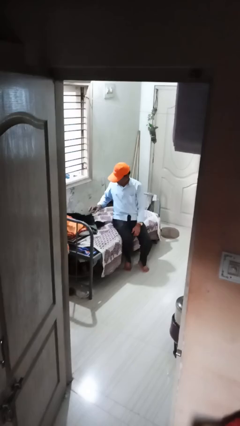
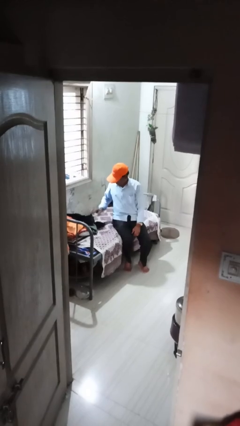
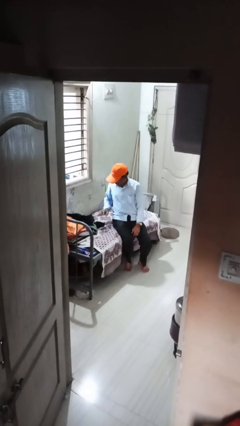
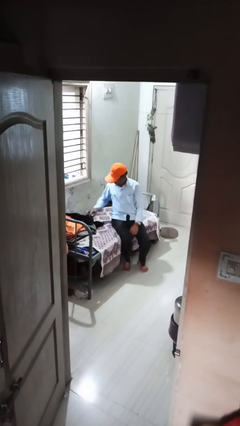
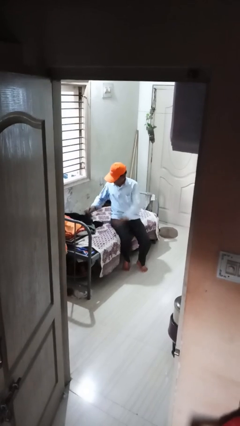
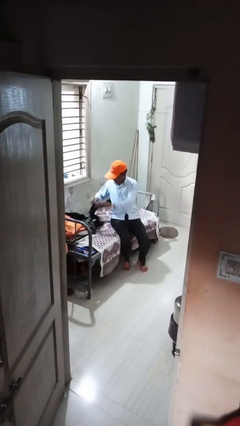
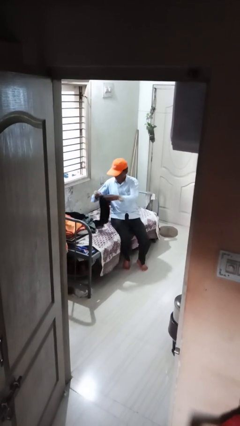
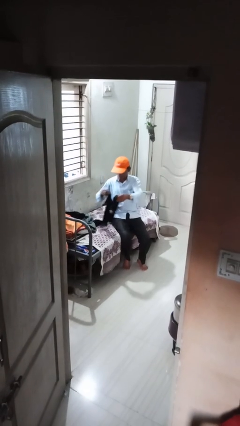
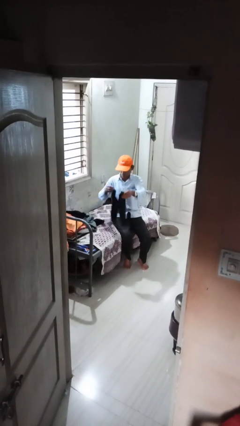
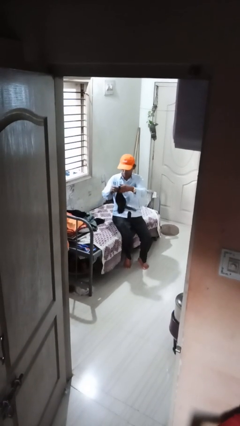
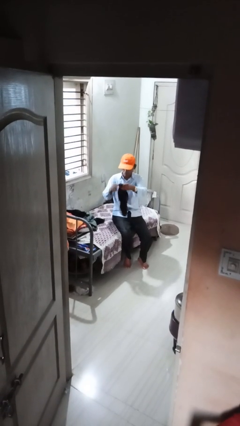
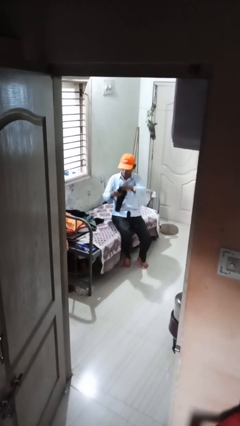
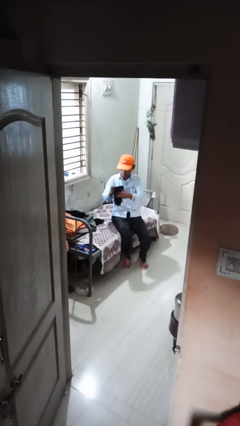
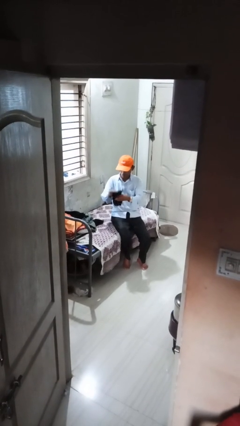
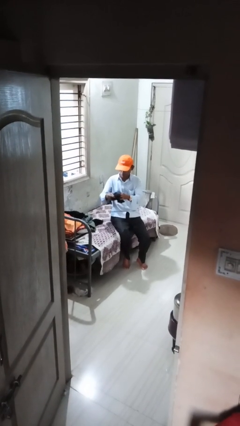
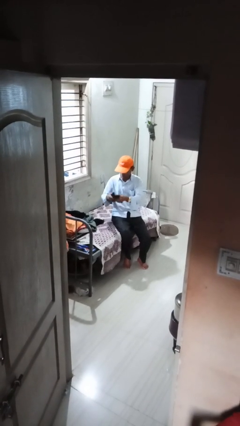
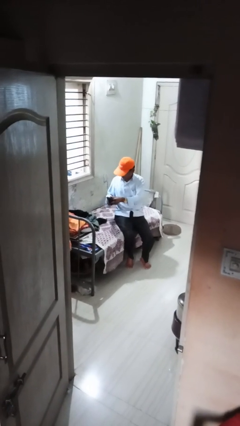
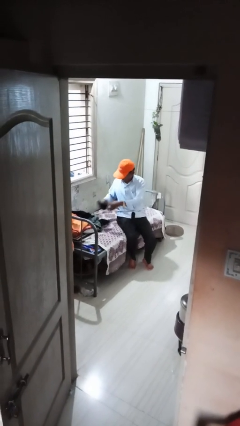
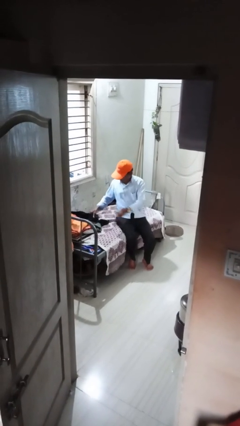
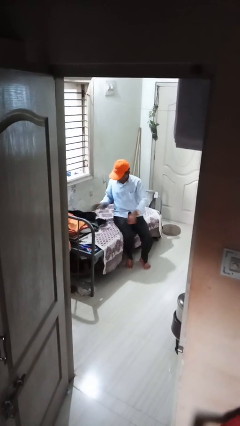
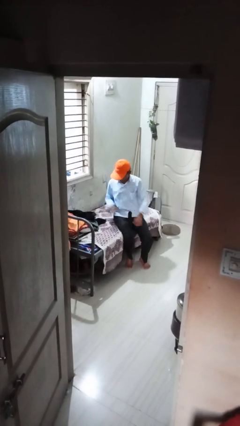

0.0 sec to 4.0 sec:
person folds socks

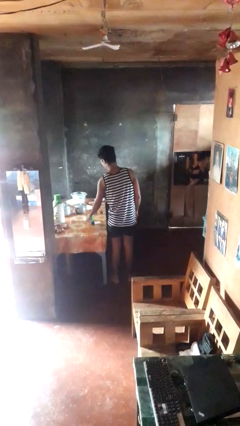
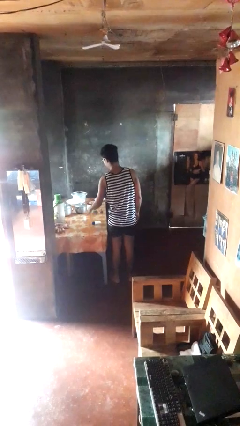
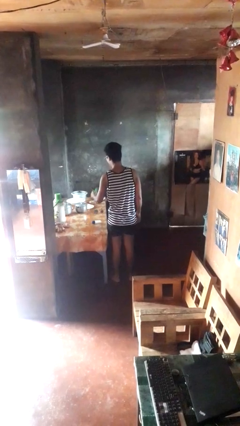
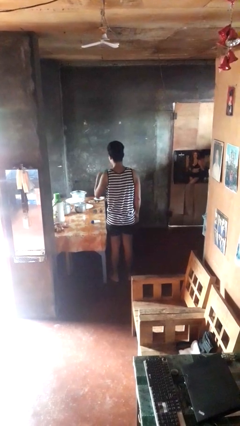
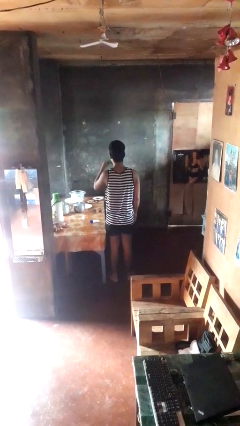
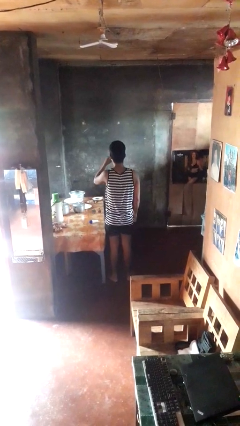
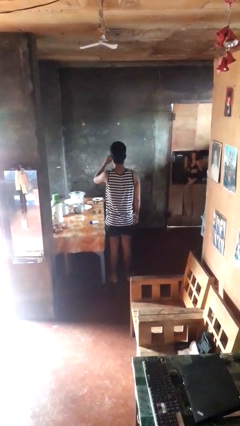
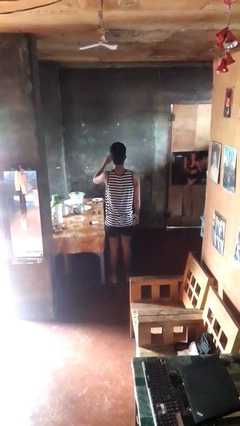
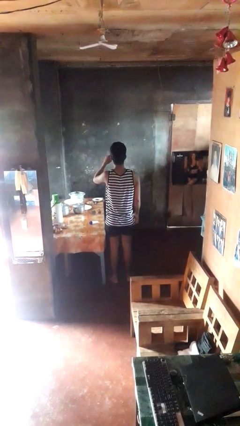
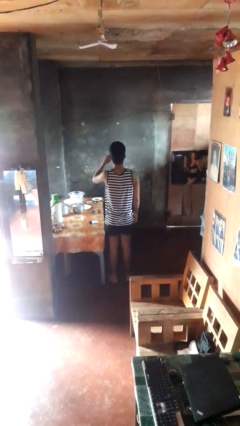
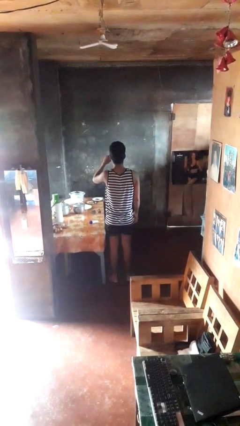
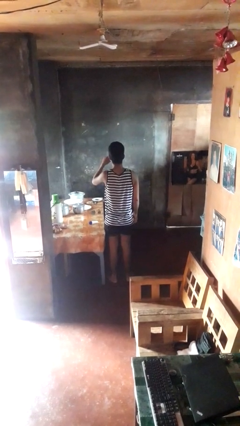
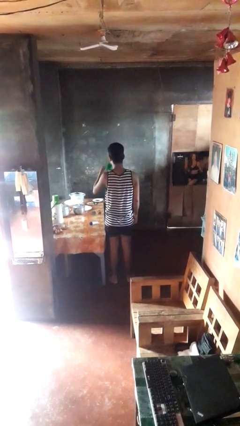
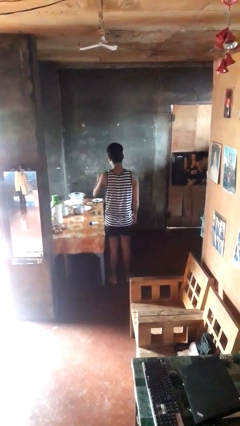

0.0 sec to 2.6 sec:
person drinks from cup

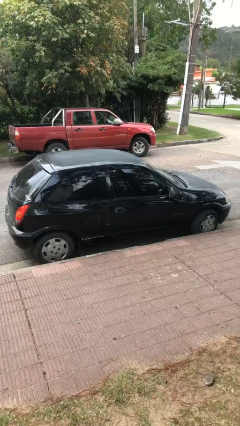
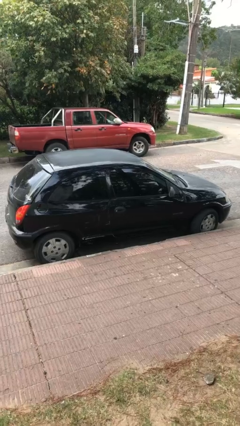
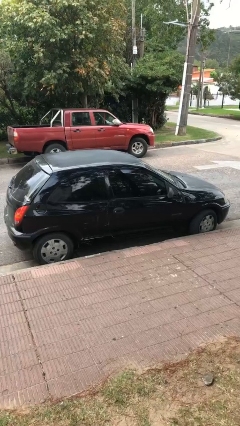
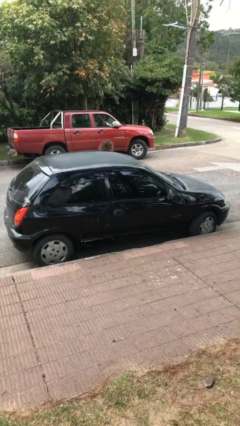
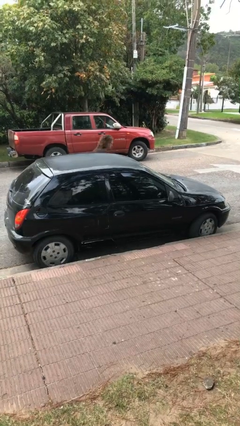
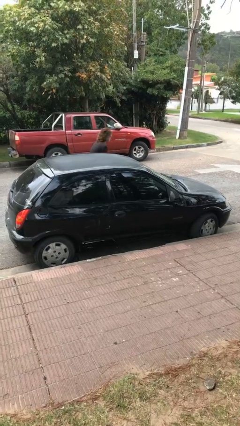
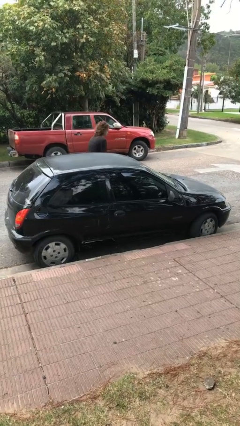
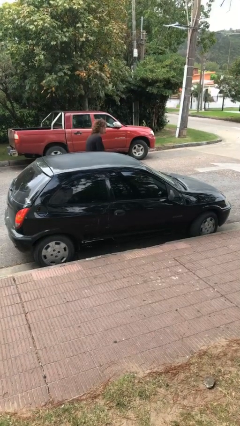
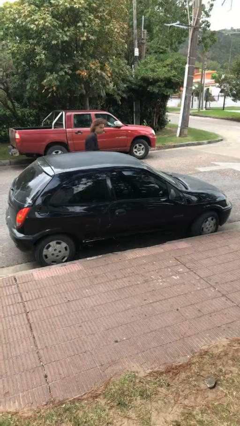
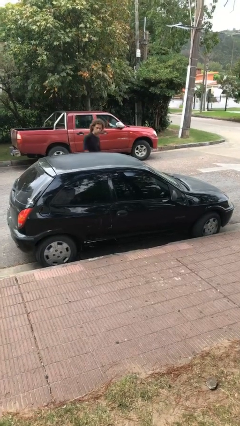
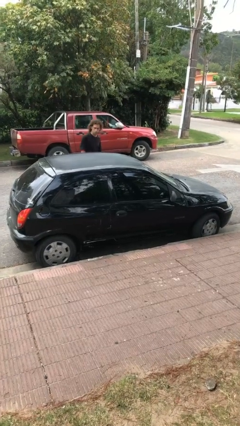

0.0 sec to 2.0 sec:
car drops off person

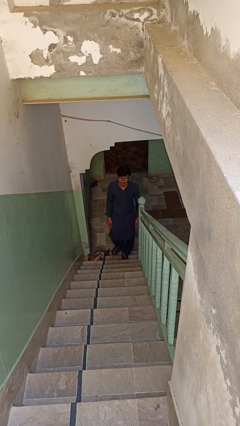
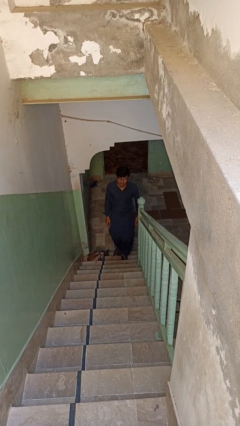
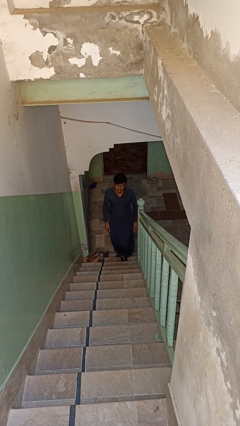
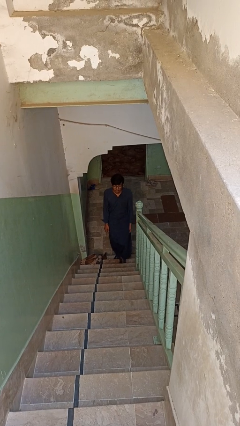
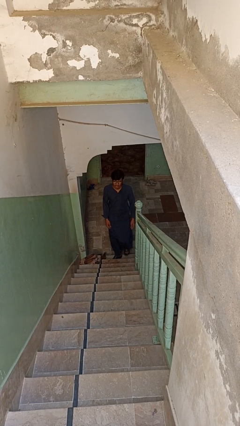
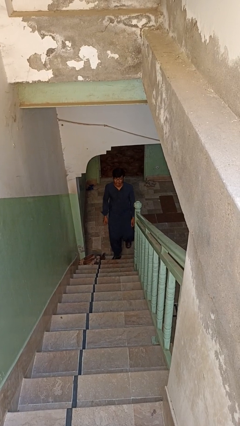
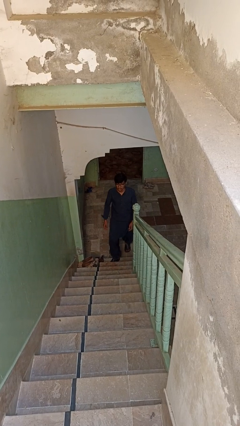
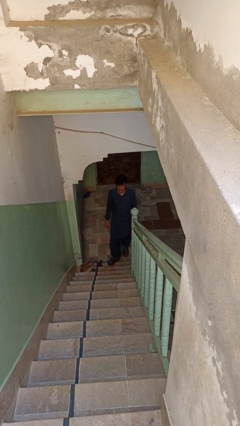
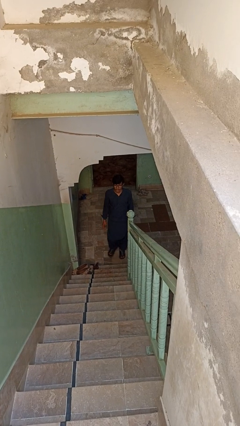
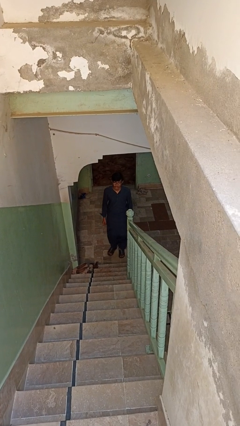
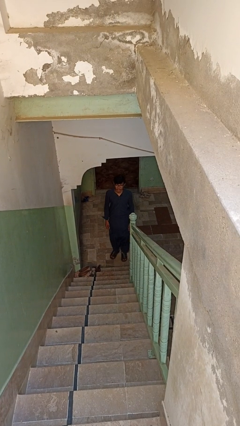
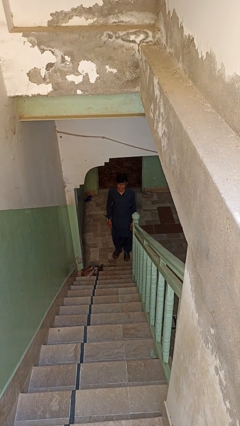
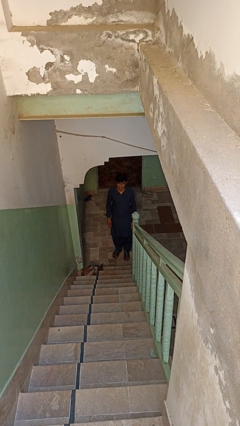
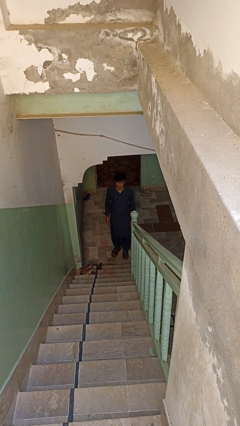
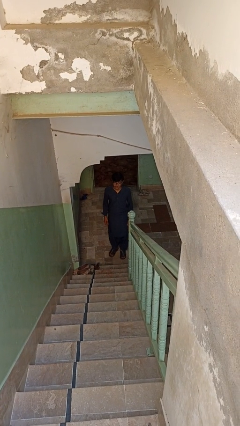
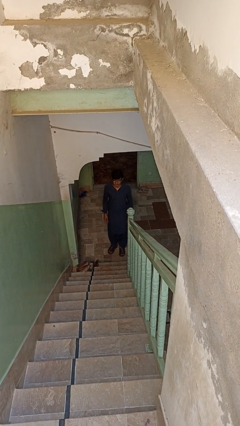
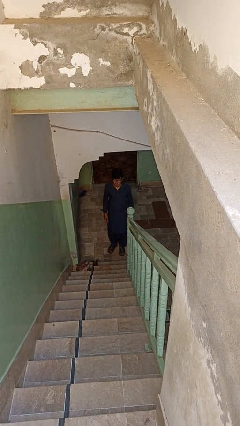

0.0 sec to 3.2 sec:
person climbs down stairs

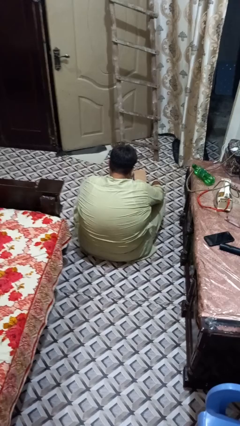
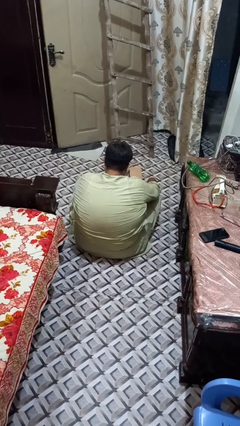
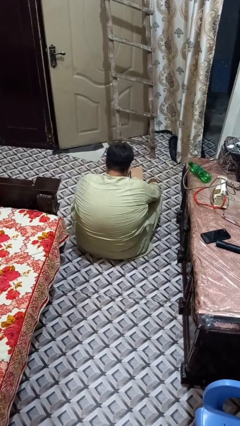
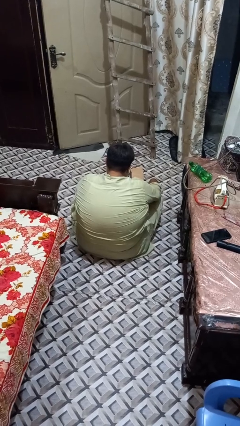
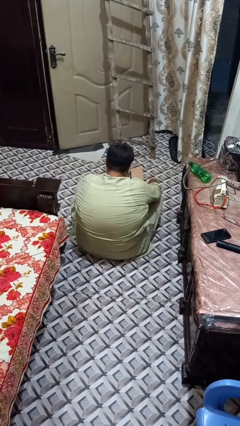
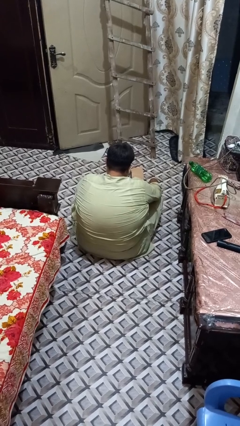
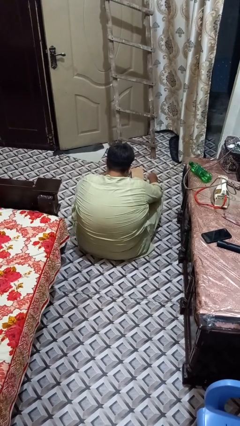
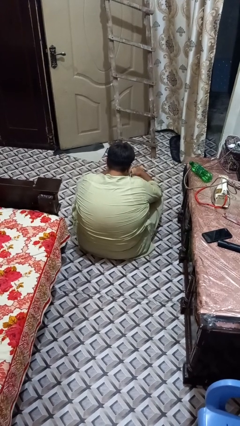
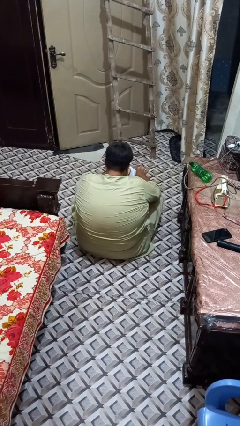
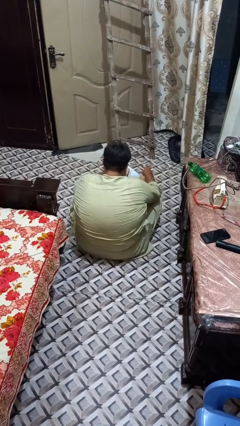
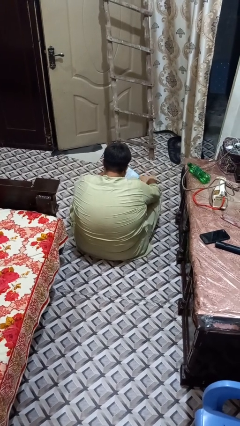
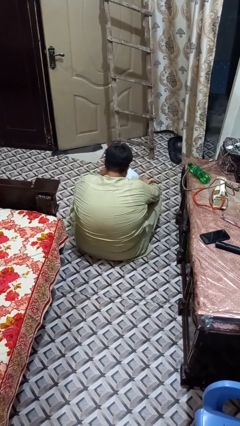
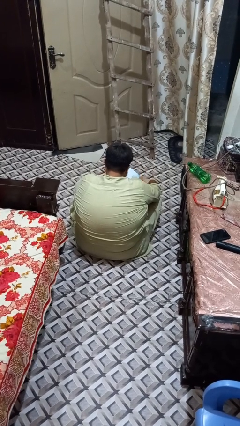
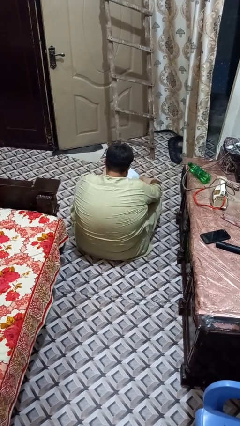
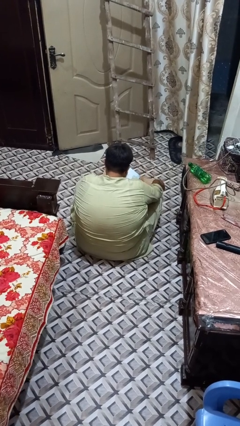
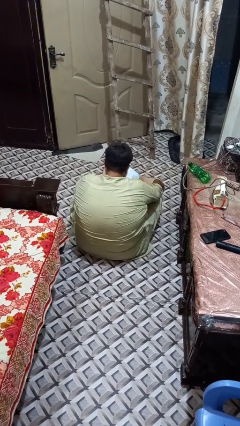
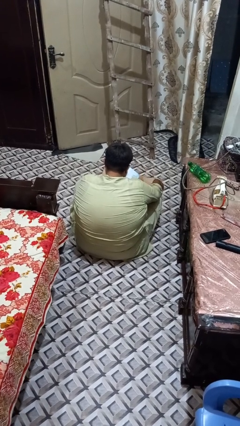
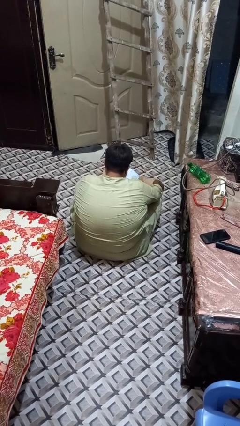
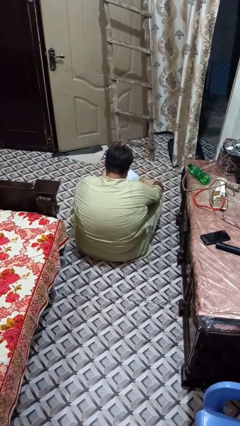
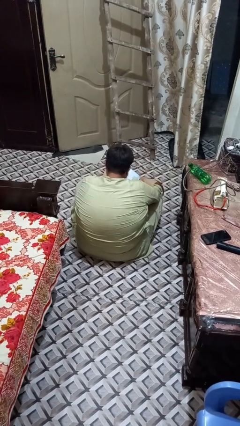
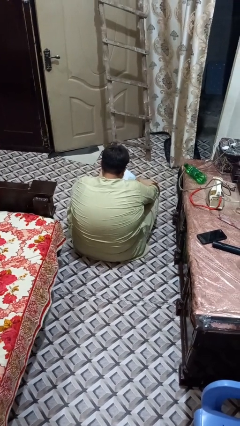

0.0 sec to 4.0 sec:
person opens box

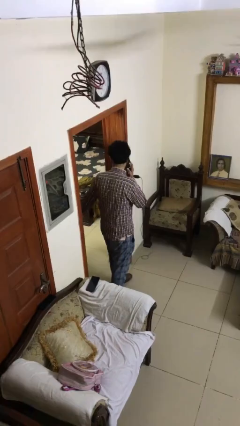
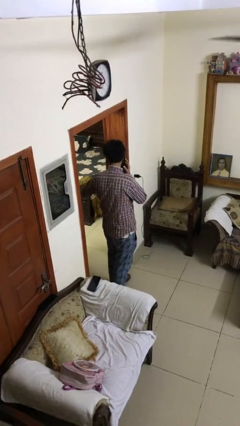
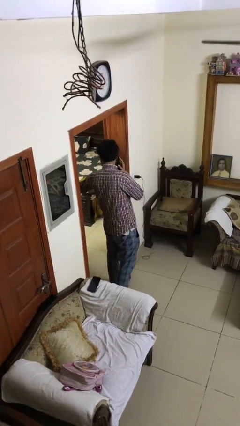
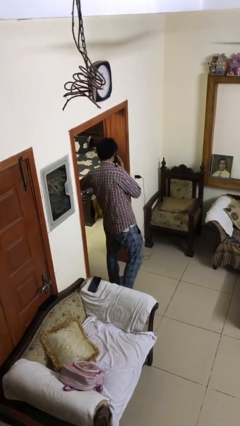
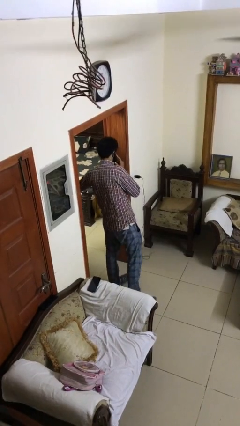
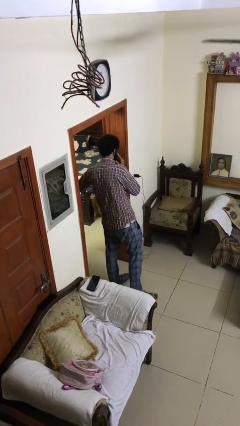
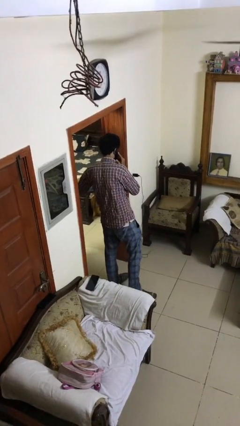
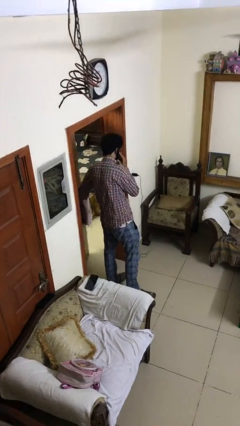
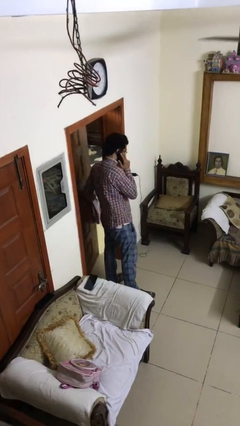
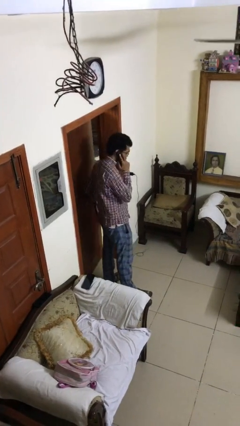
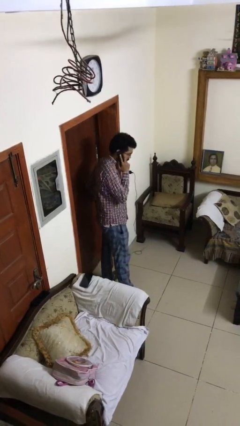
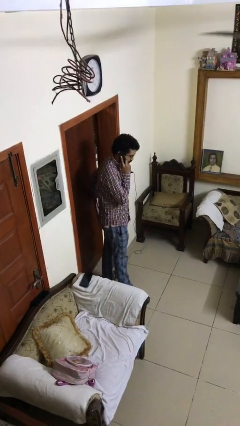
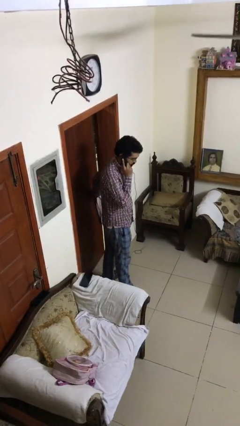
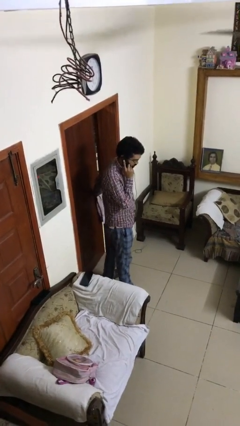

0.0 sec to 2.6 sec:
person closes facility door
